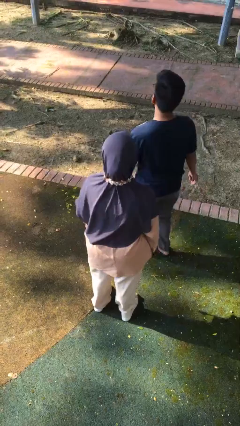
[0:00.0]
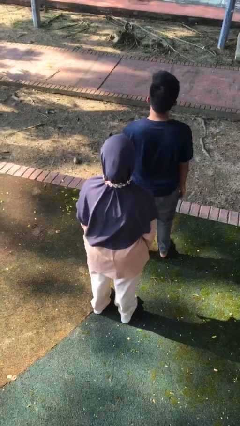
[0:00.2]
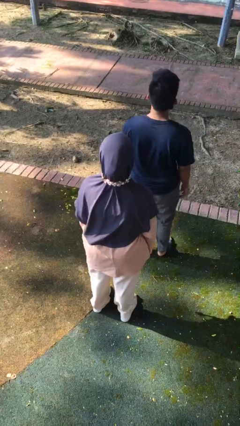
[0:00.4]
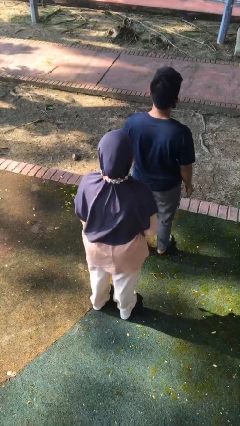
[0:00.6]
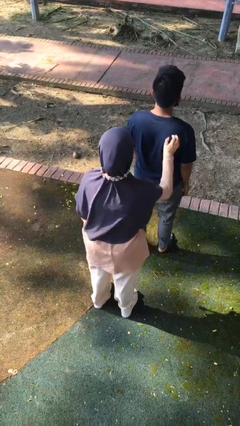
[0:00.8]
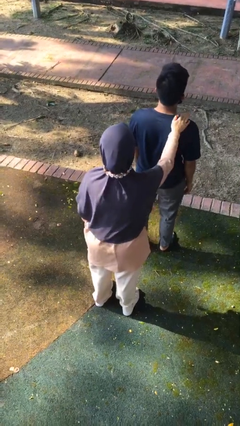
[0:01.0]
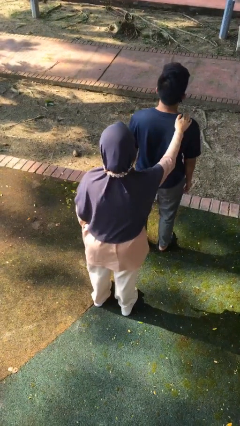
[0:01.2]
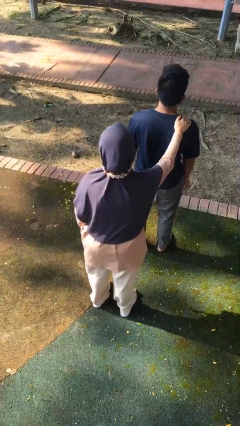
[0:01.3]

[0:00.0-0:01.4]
person grabs person by shoulder

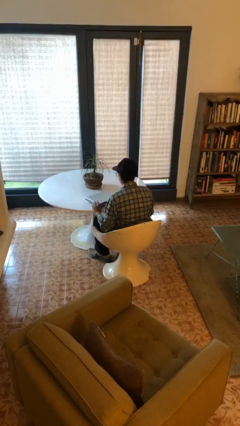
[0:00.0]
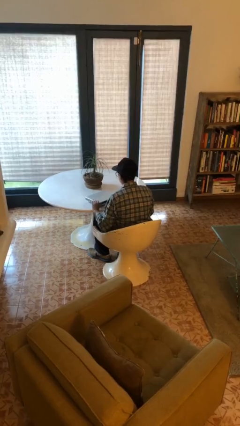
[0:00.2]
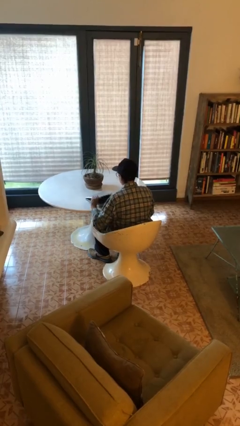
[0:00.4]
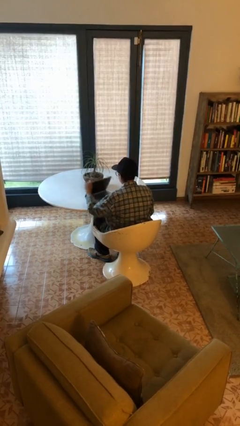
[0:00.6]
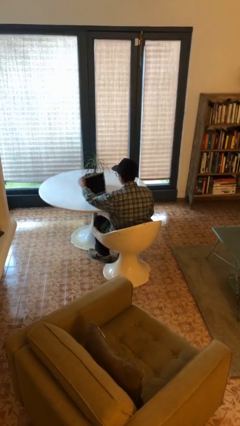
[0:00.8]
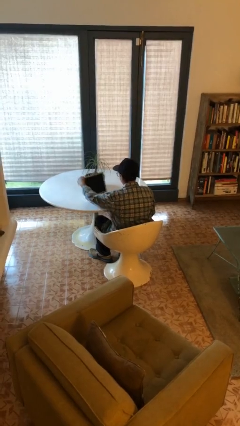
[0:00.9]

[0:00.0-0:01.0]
person opens laptop

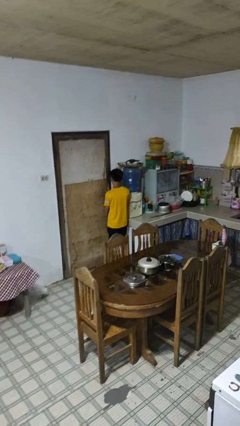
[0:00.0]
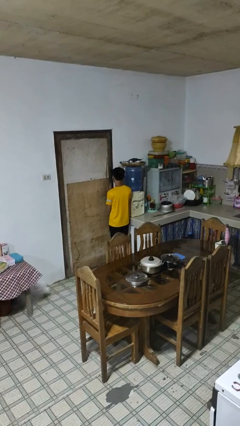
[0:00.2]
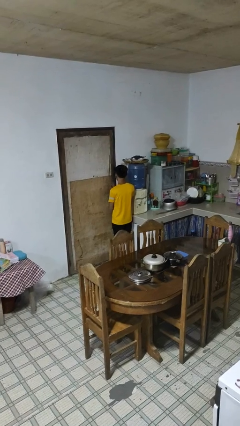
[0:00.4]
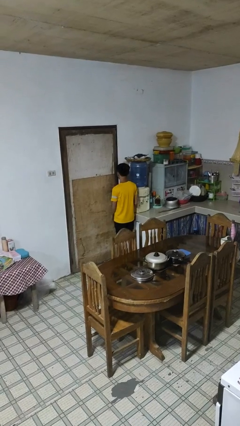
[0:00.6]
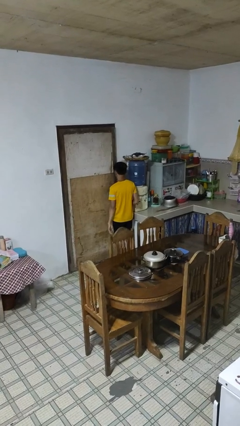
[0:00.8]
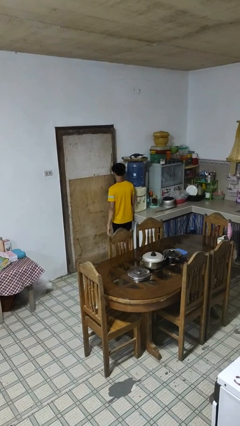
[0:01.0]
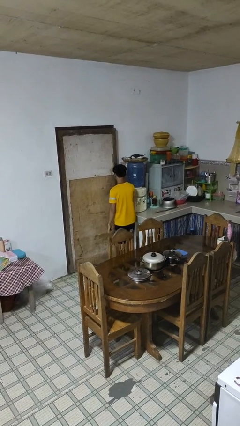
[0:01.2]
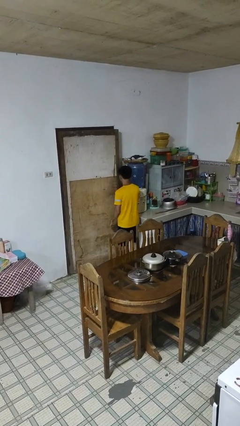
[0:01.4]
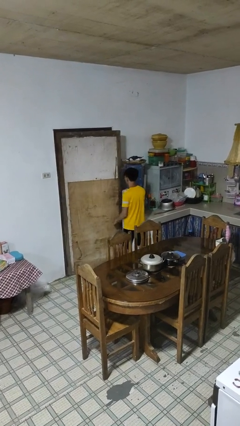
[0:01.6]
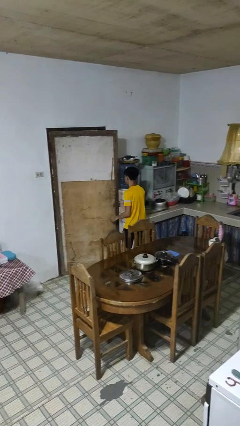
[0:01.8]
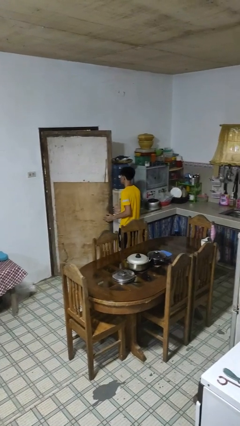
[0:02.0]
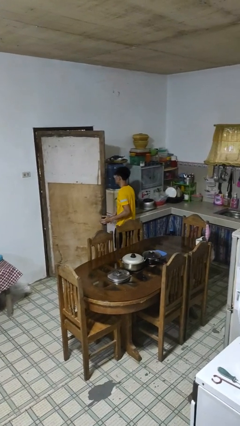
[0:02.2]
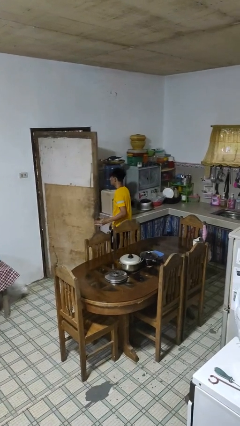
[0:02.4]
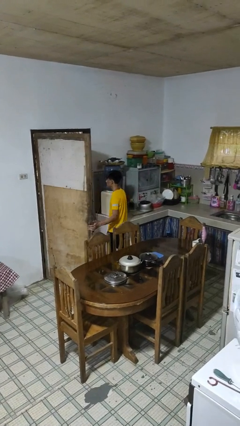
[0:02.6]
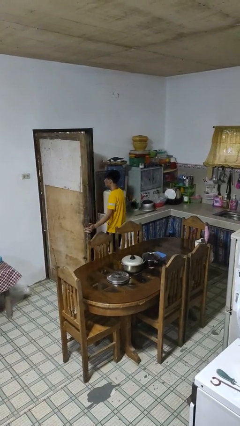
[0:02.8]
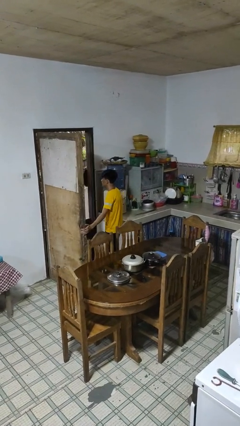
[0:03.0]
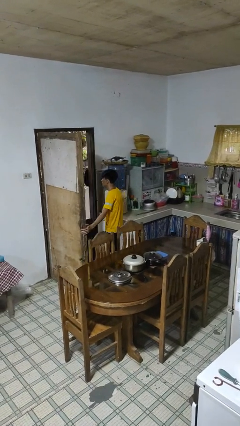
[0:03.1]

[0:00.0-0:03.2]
person opens facility door

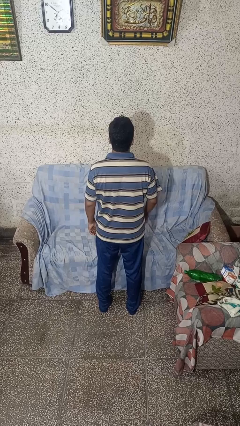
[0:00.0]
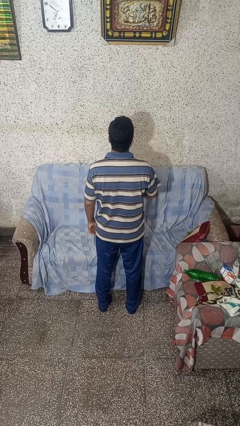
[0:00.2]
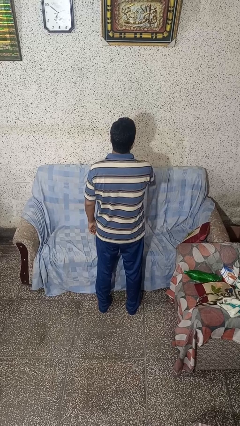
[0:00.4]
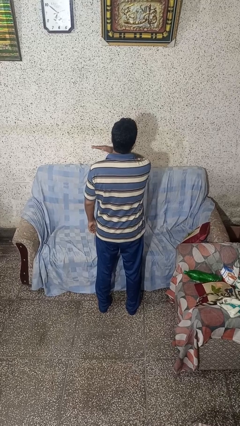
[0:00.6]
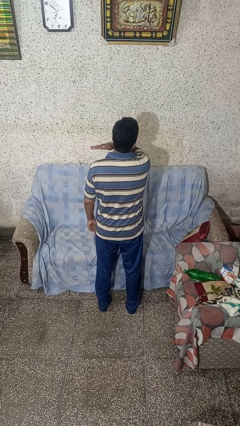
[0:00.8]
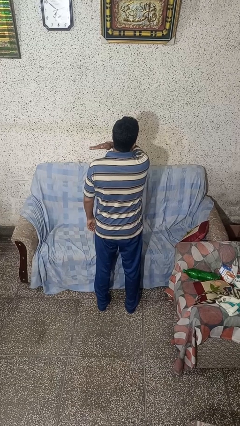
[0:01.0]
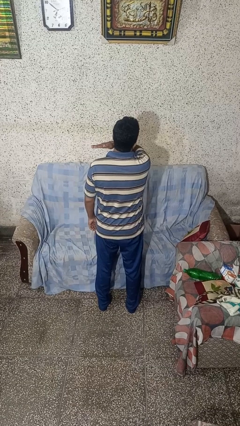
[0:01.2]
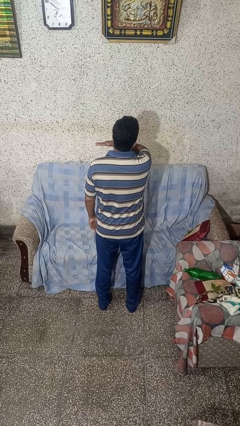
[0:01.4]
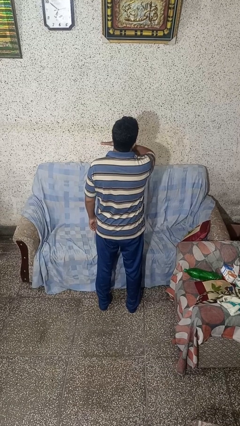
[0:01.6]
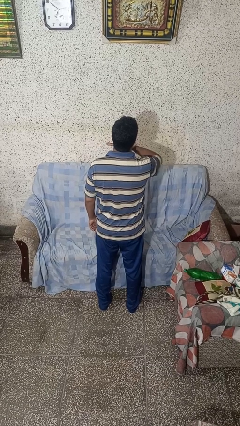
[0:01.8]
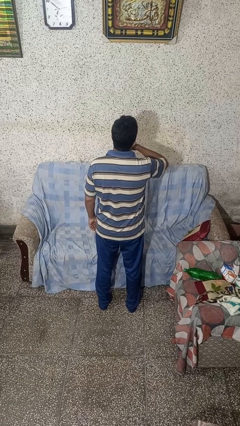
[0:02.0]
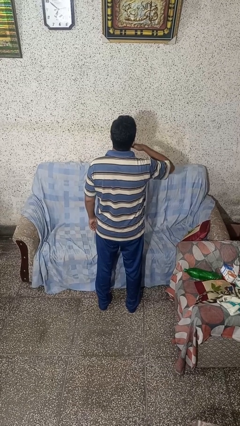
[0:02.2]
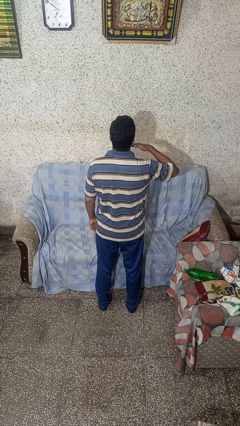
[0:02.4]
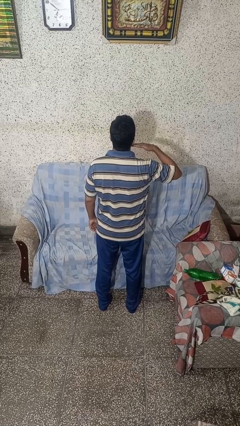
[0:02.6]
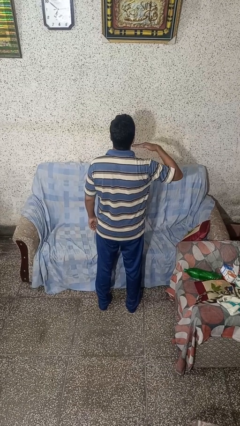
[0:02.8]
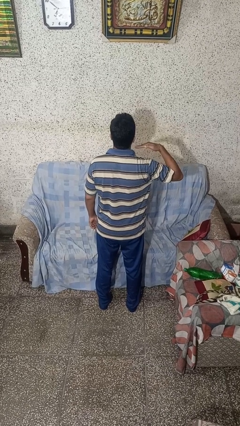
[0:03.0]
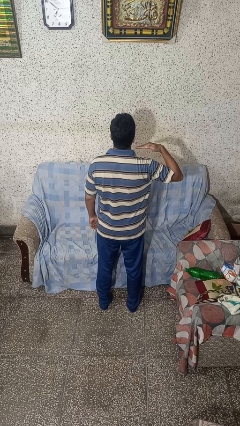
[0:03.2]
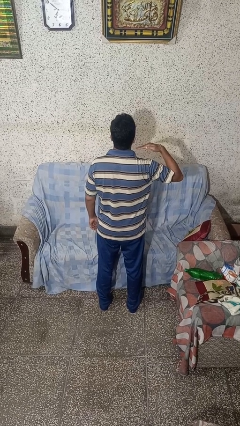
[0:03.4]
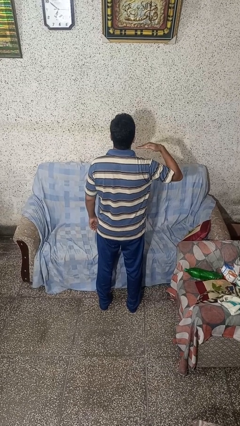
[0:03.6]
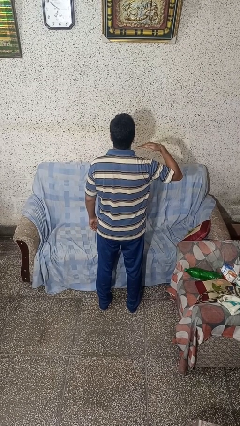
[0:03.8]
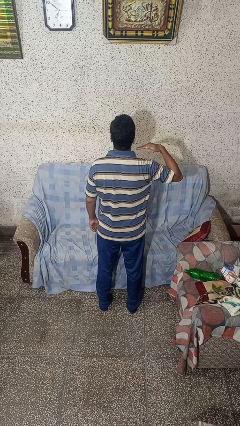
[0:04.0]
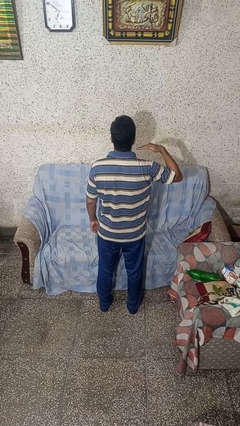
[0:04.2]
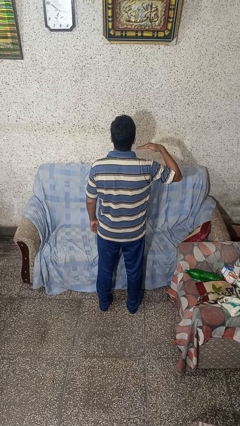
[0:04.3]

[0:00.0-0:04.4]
person gestures cut

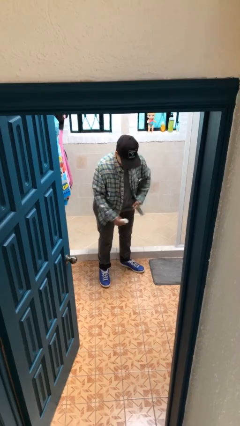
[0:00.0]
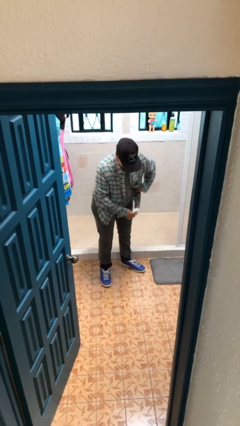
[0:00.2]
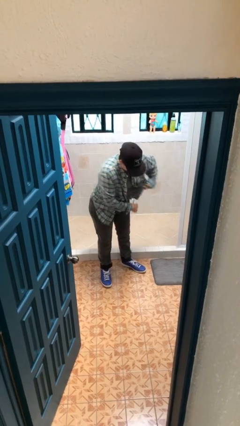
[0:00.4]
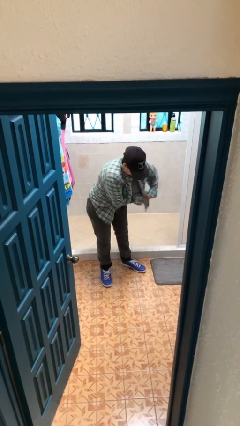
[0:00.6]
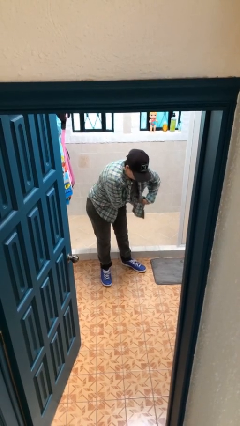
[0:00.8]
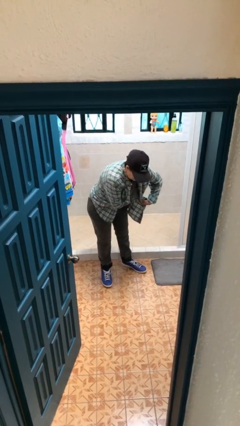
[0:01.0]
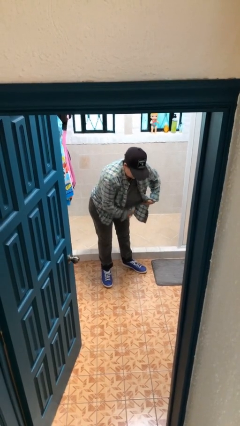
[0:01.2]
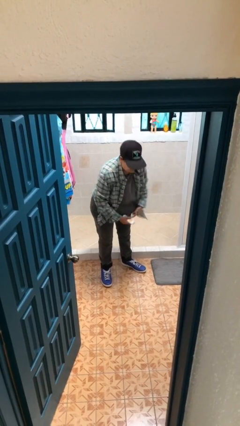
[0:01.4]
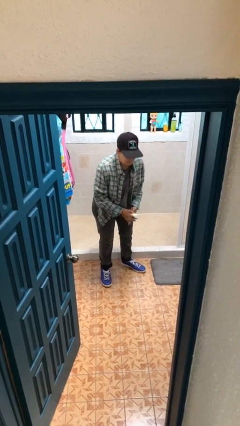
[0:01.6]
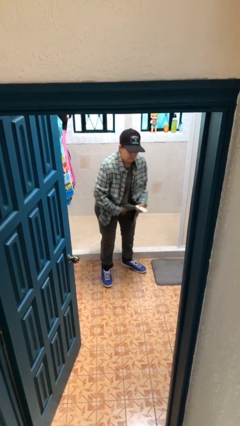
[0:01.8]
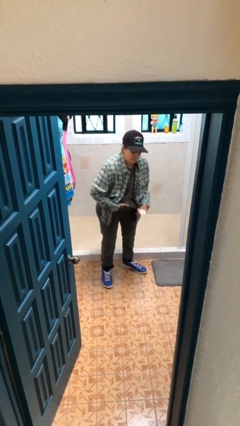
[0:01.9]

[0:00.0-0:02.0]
person applies deodorant

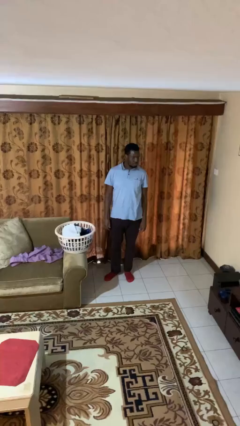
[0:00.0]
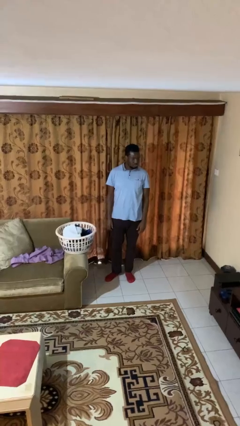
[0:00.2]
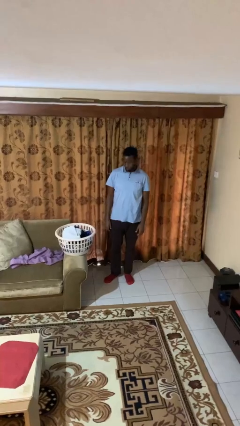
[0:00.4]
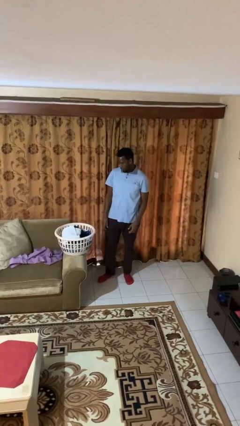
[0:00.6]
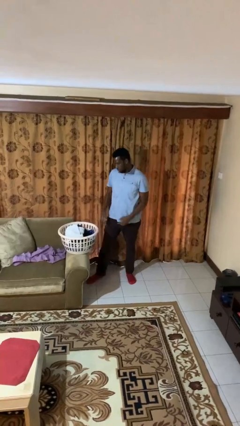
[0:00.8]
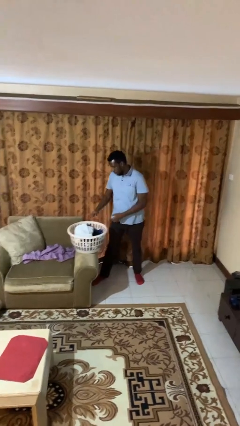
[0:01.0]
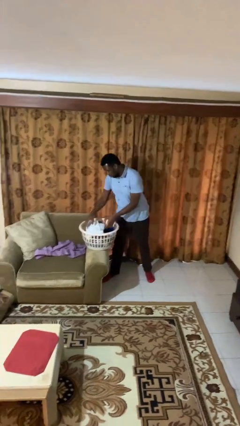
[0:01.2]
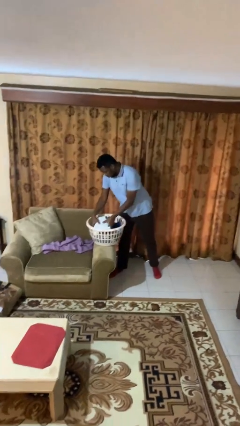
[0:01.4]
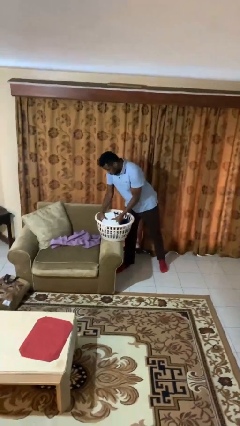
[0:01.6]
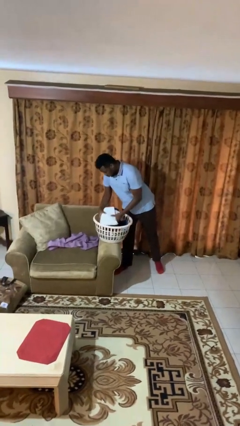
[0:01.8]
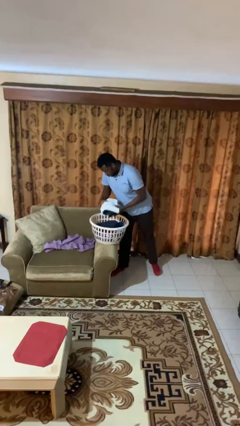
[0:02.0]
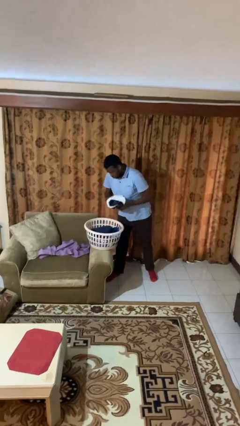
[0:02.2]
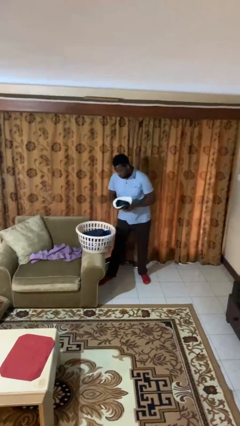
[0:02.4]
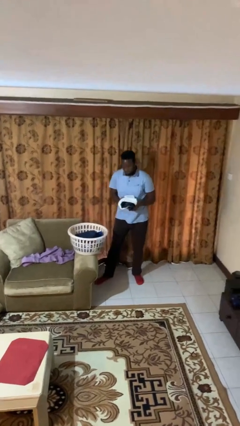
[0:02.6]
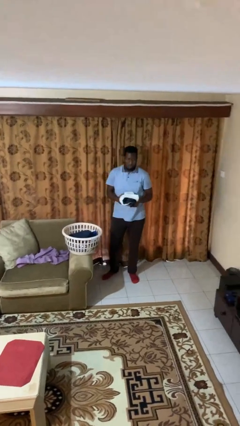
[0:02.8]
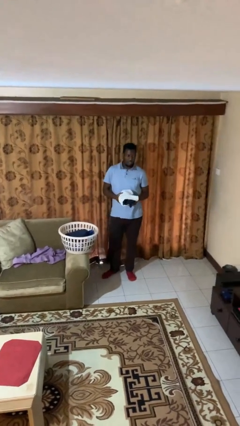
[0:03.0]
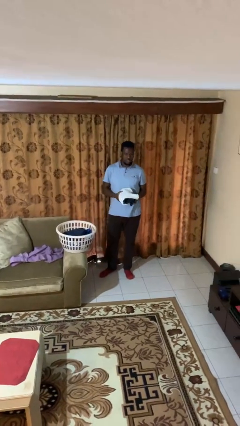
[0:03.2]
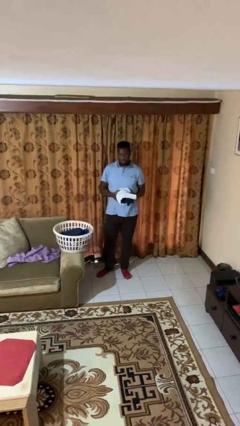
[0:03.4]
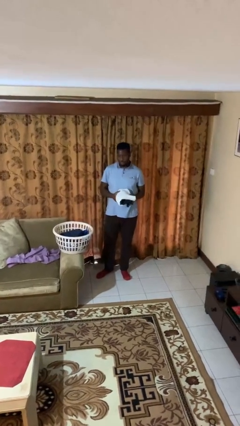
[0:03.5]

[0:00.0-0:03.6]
person takes object from basket

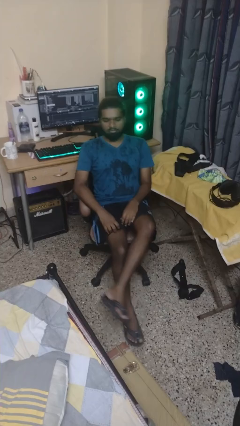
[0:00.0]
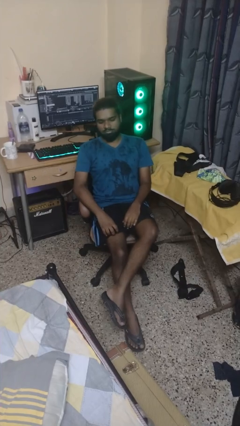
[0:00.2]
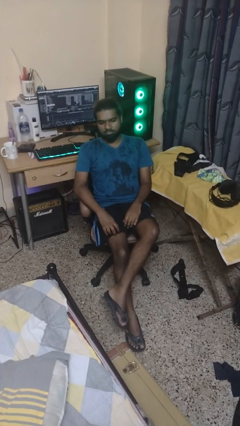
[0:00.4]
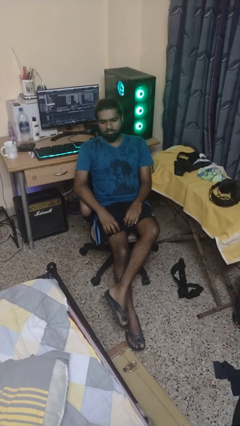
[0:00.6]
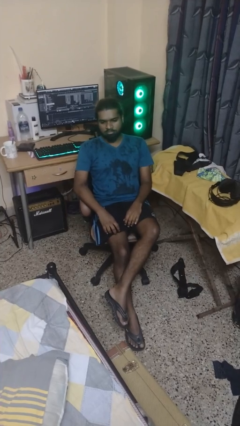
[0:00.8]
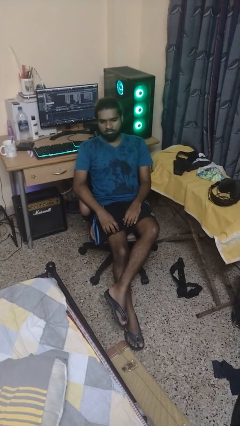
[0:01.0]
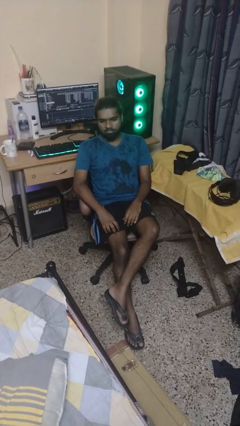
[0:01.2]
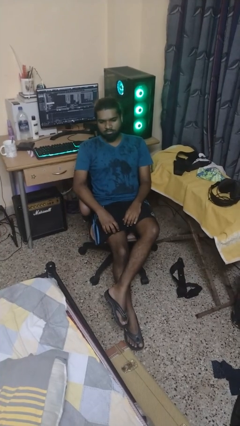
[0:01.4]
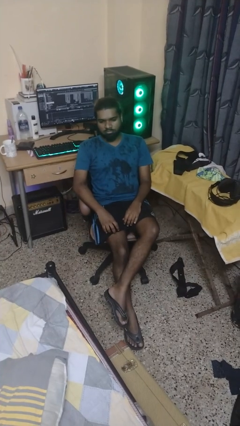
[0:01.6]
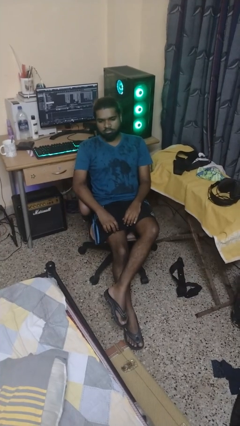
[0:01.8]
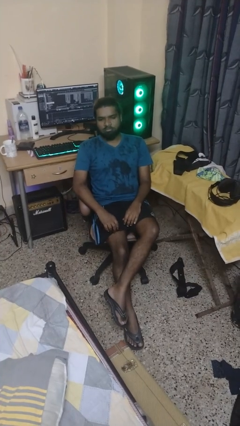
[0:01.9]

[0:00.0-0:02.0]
person crosses legs
